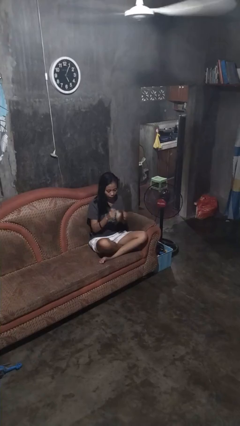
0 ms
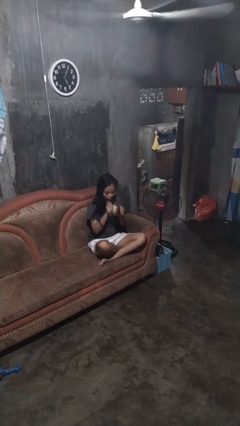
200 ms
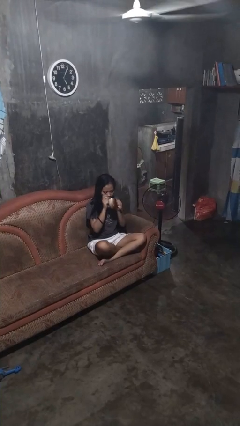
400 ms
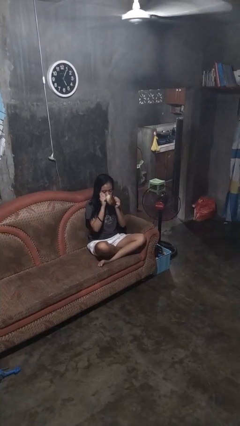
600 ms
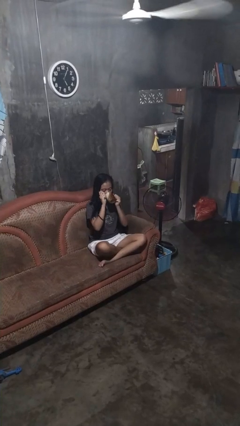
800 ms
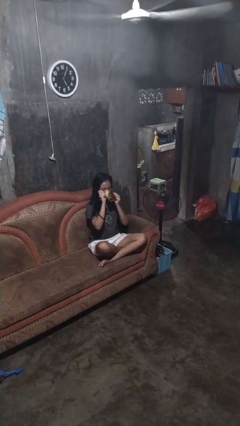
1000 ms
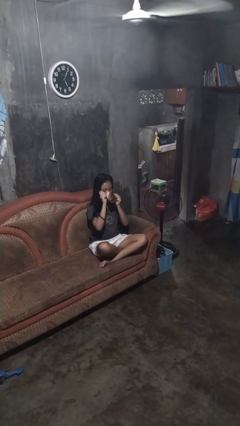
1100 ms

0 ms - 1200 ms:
person drinks from mug

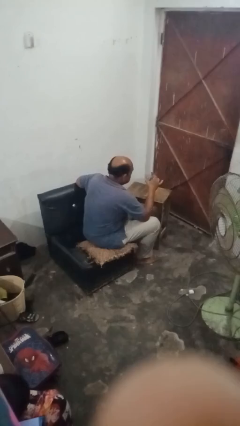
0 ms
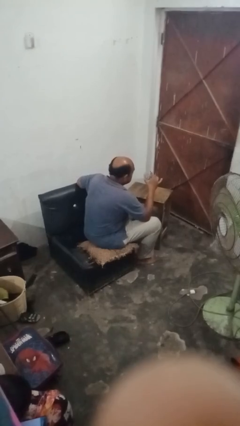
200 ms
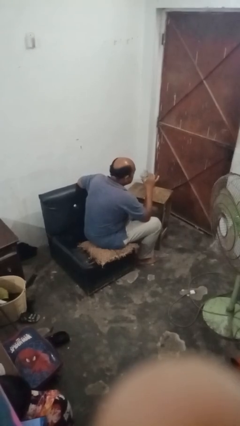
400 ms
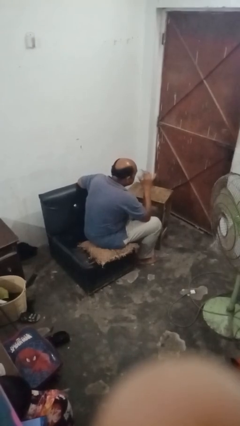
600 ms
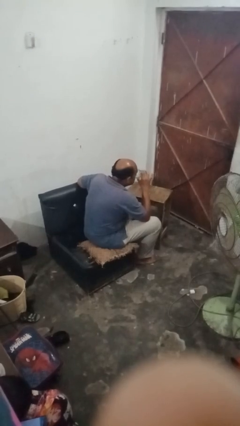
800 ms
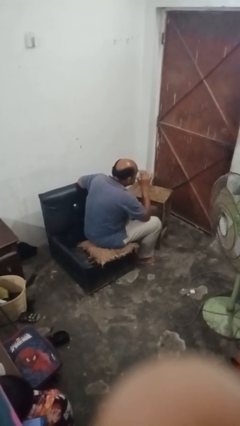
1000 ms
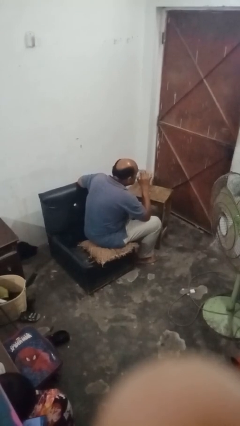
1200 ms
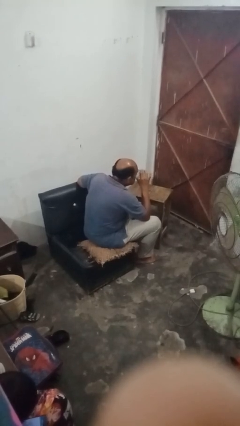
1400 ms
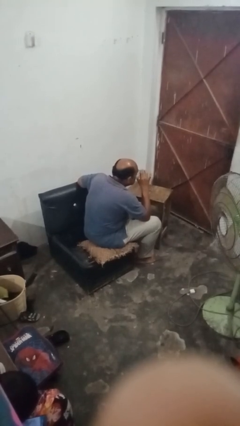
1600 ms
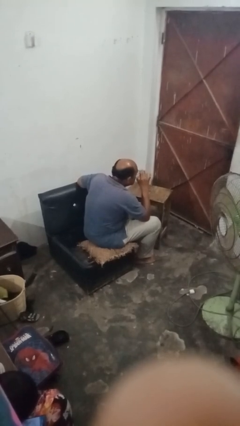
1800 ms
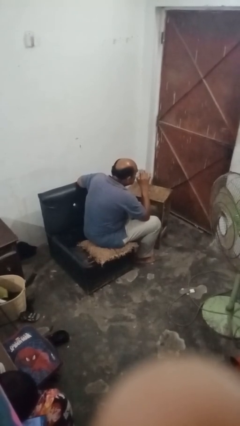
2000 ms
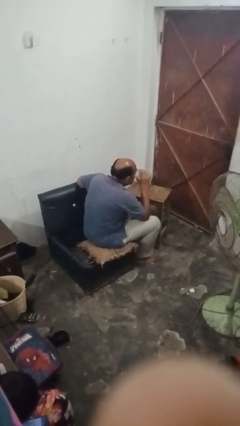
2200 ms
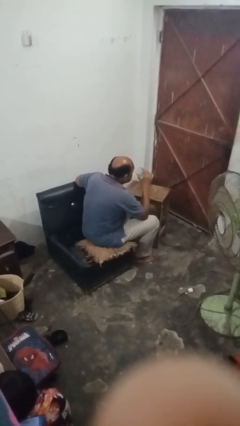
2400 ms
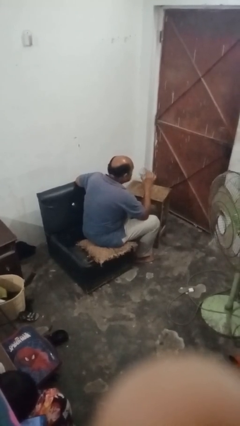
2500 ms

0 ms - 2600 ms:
person drinks from shotglass

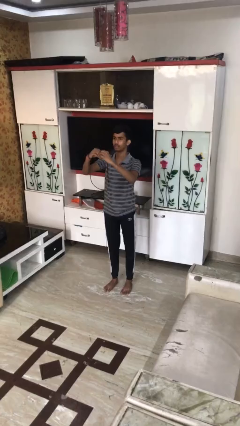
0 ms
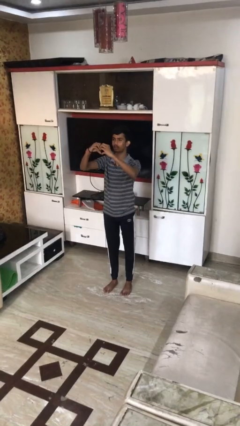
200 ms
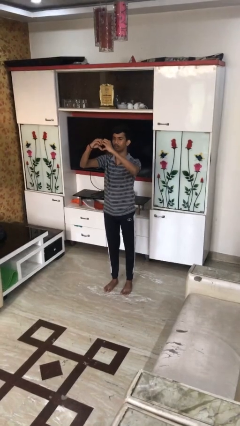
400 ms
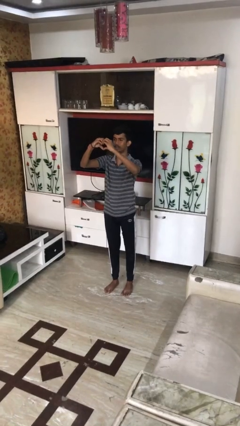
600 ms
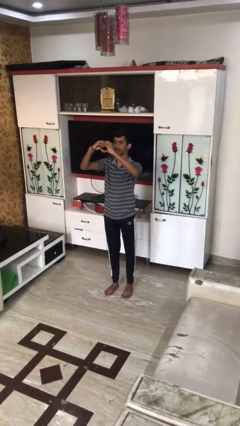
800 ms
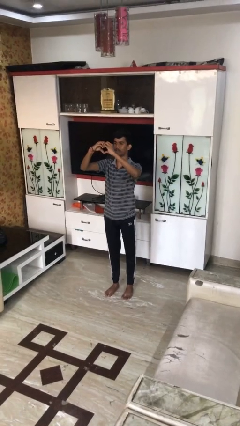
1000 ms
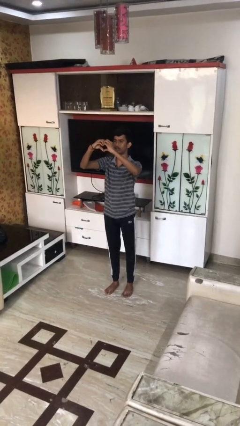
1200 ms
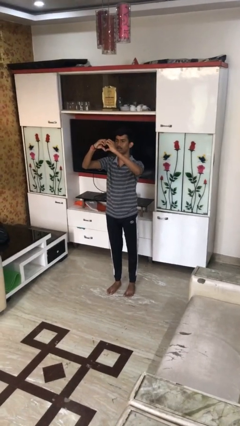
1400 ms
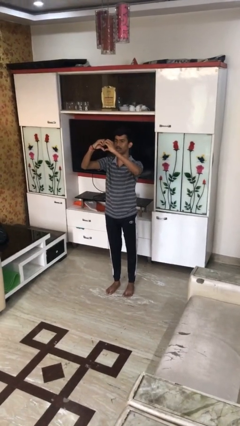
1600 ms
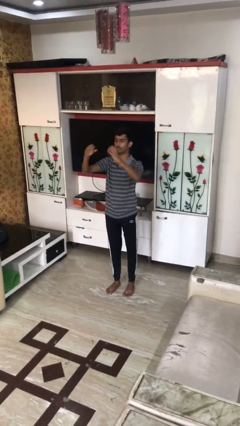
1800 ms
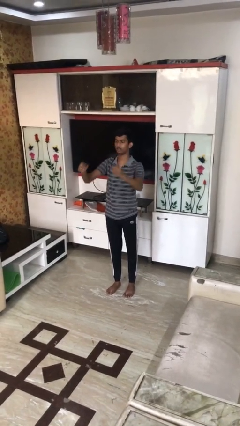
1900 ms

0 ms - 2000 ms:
person gestures heart

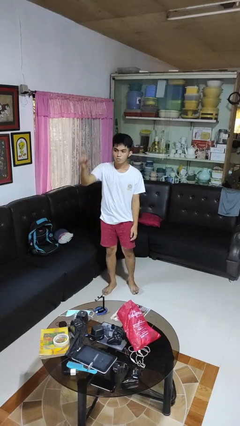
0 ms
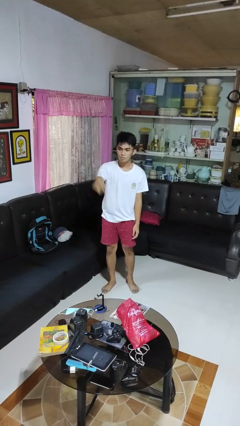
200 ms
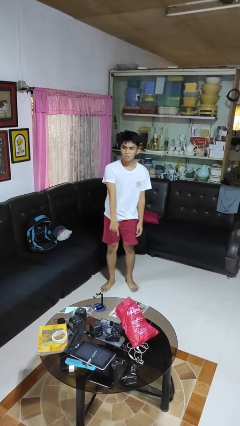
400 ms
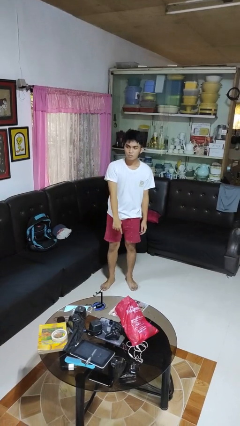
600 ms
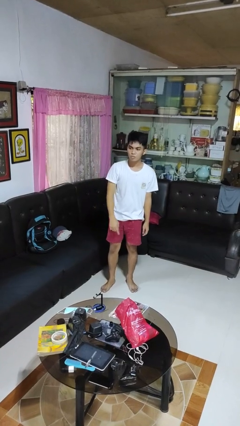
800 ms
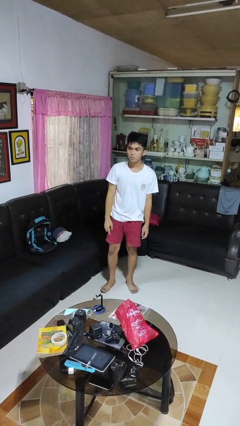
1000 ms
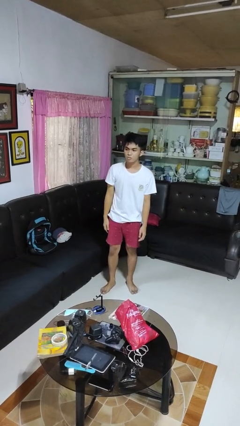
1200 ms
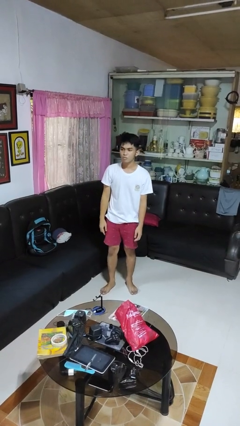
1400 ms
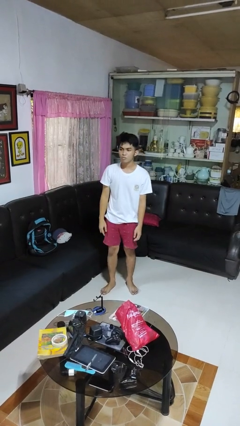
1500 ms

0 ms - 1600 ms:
person gestures swipe down

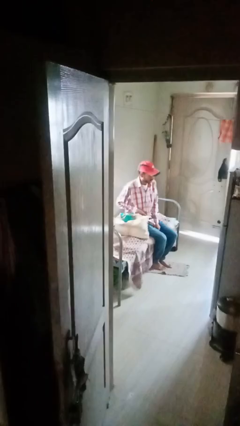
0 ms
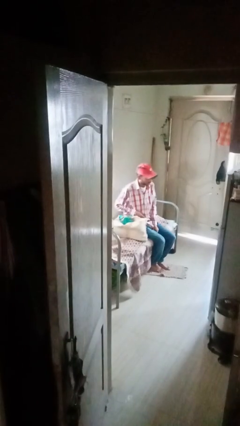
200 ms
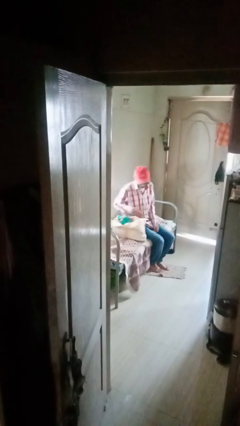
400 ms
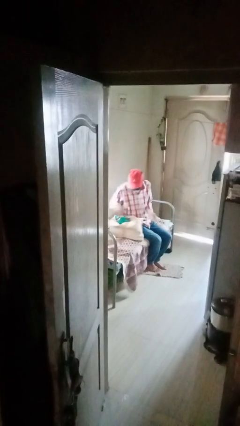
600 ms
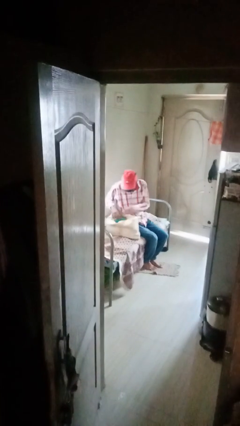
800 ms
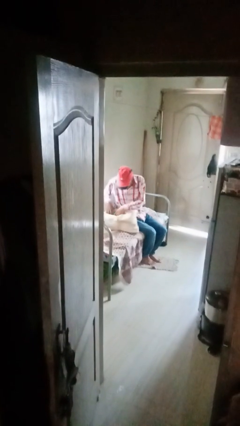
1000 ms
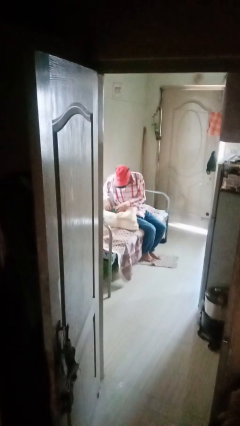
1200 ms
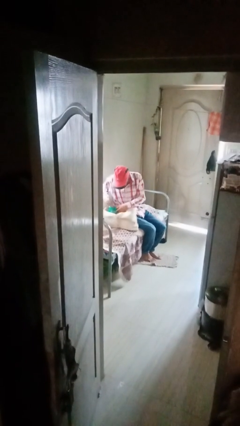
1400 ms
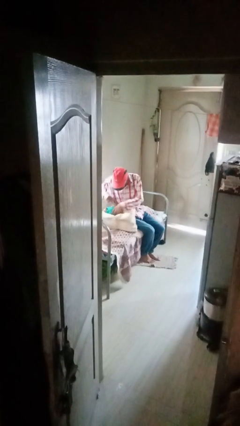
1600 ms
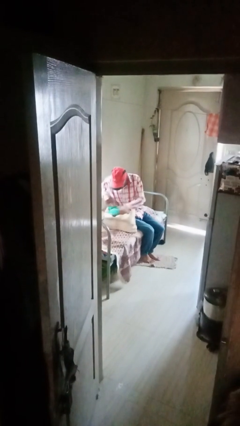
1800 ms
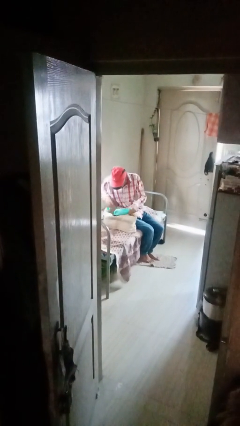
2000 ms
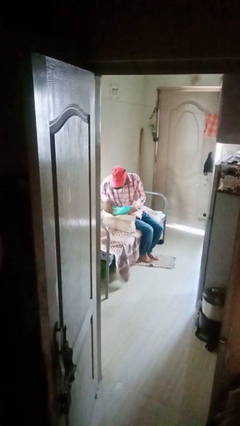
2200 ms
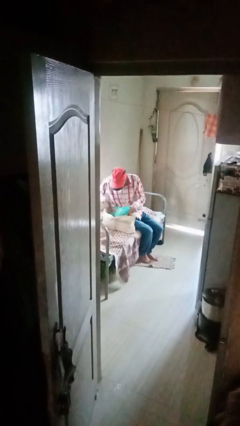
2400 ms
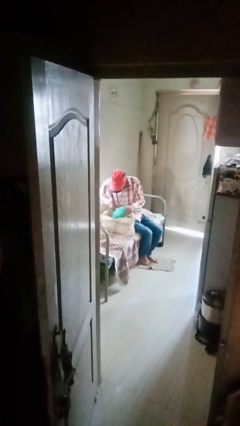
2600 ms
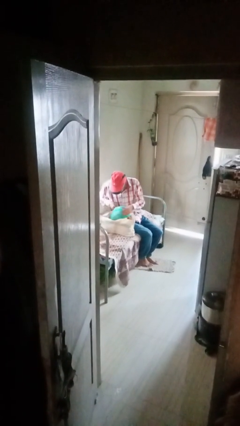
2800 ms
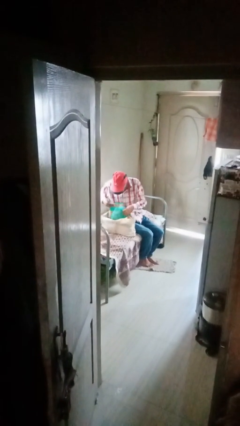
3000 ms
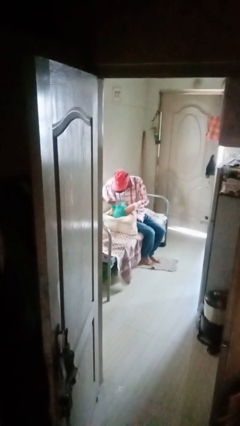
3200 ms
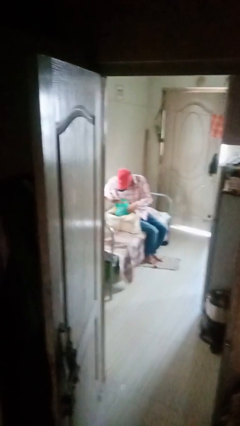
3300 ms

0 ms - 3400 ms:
person searches in bag

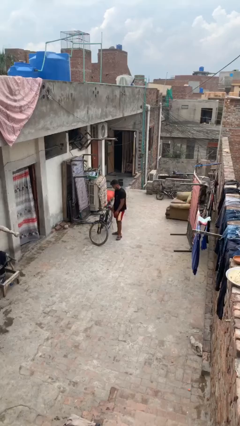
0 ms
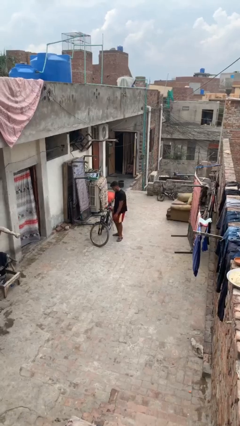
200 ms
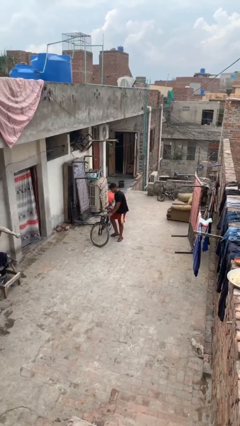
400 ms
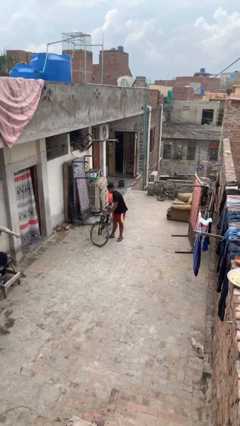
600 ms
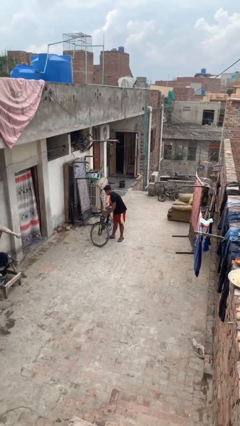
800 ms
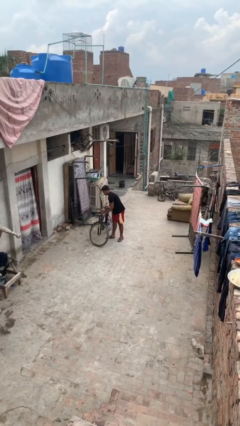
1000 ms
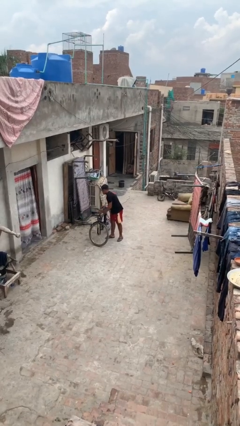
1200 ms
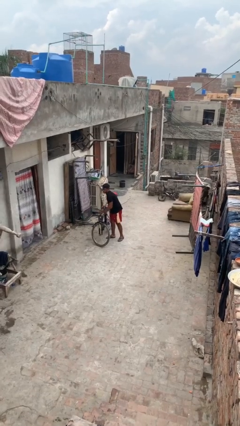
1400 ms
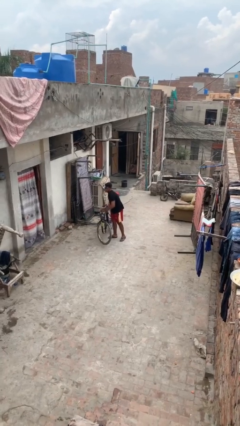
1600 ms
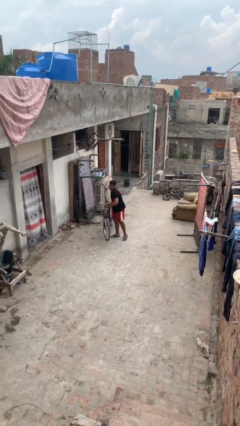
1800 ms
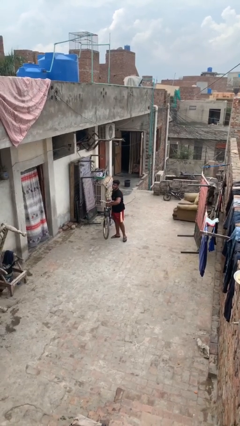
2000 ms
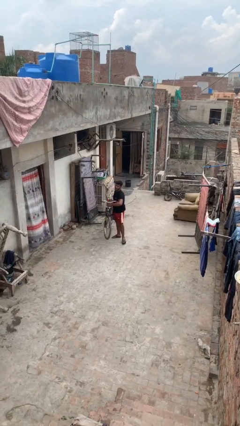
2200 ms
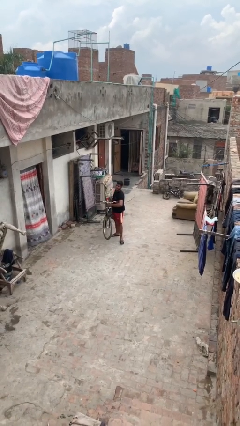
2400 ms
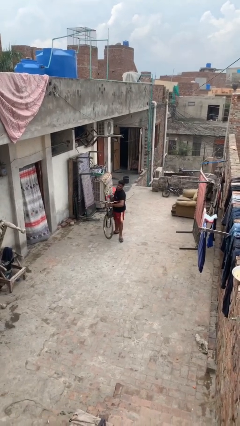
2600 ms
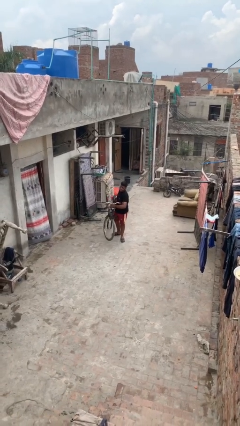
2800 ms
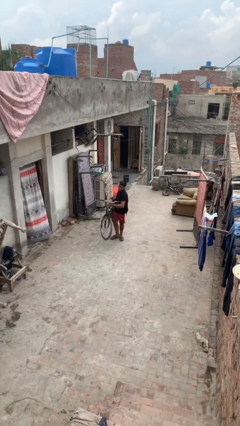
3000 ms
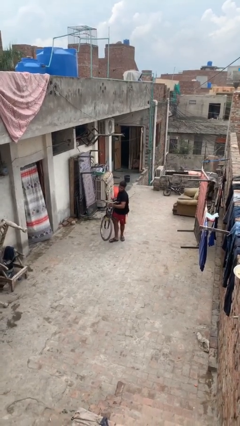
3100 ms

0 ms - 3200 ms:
person picks up object from floor

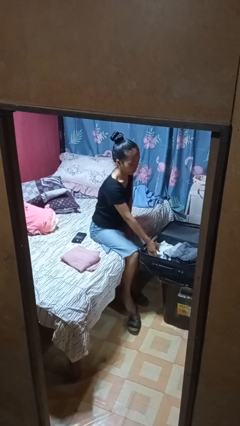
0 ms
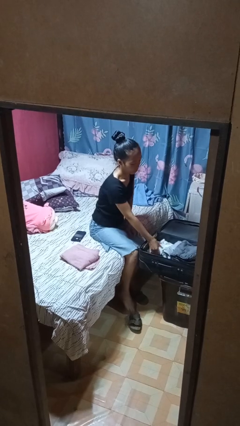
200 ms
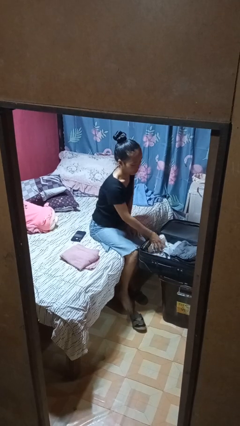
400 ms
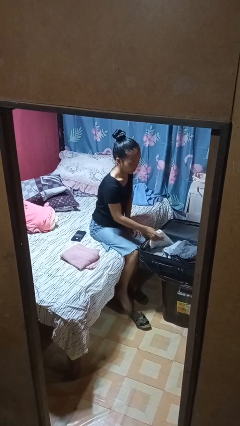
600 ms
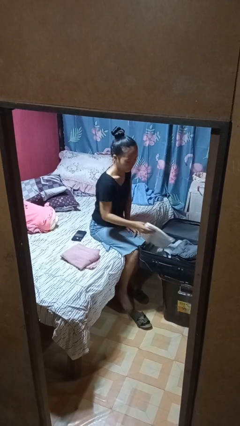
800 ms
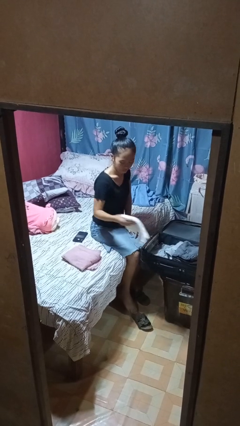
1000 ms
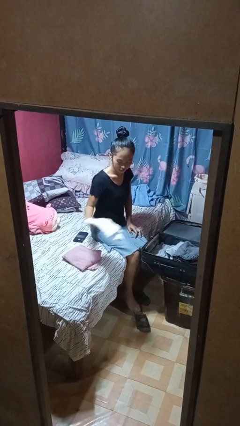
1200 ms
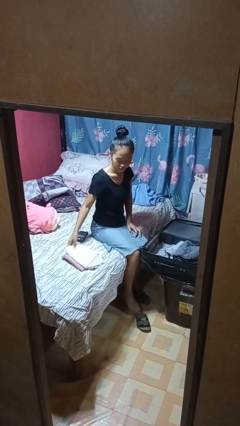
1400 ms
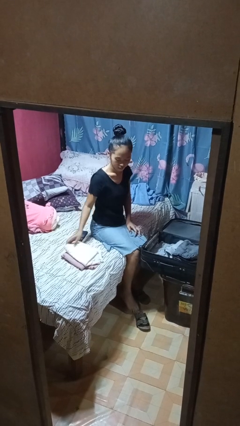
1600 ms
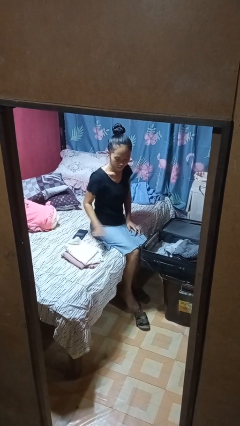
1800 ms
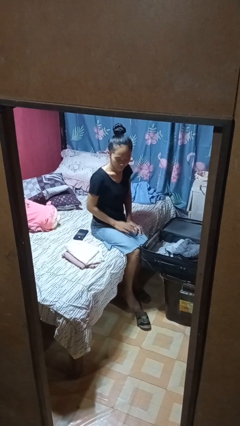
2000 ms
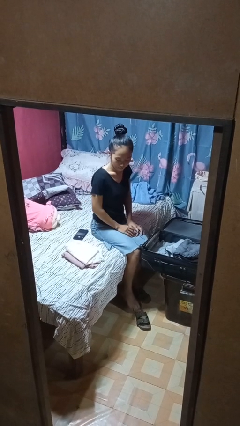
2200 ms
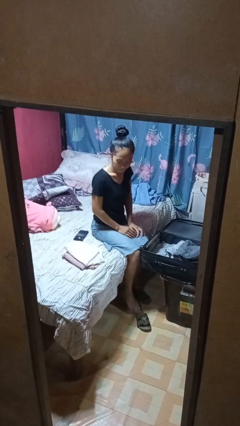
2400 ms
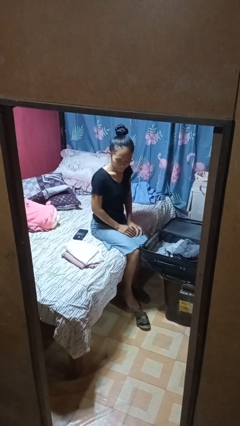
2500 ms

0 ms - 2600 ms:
person unloads clothes from suitcase
